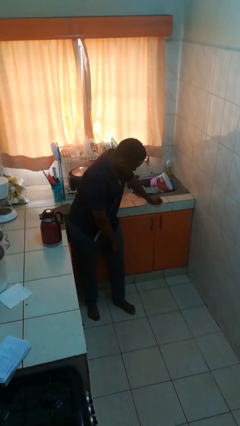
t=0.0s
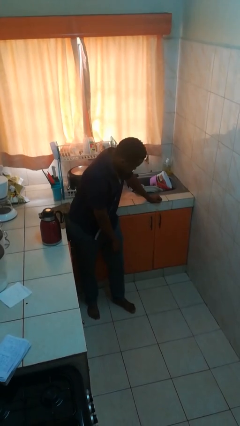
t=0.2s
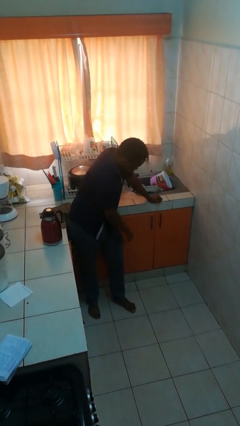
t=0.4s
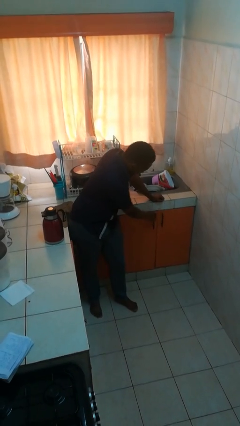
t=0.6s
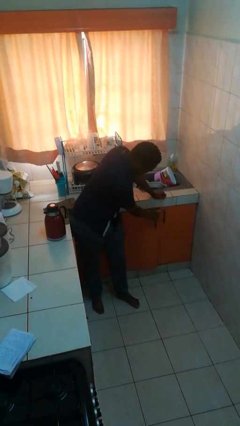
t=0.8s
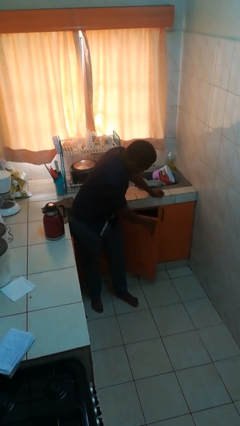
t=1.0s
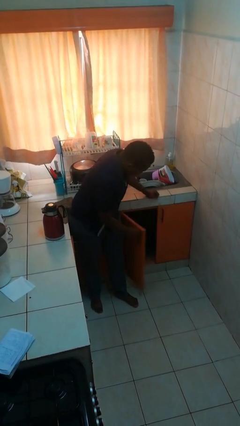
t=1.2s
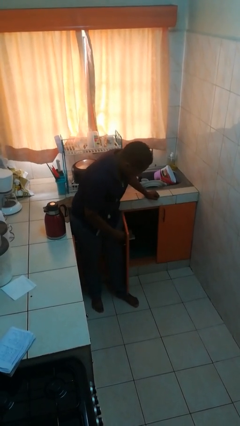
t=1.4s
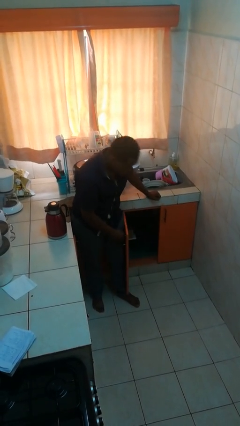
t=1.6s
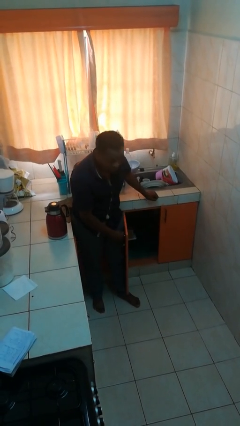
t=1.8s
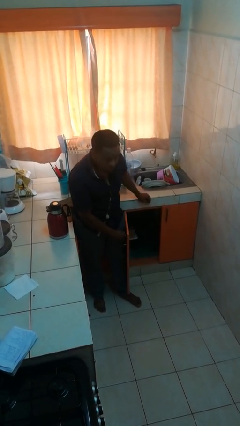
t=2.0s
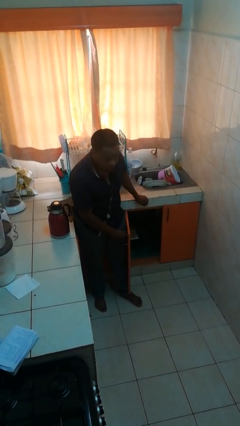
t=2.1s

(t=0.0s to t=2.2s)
person opens cabinet

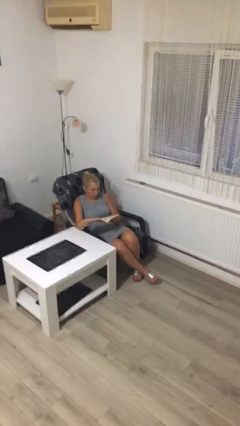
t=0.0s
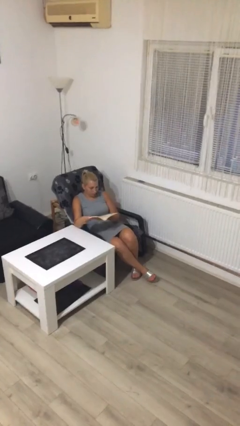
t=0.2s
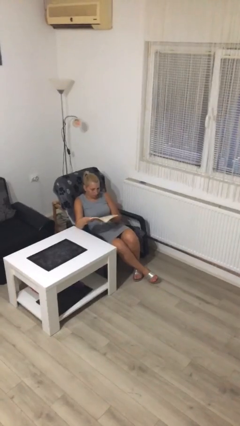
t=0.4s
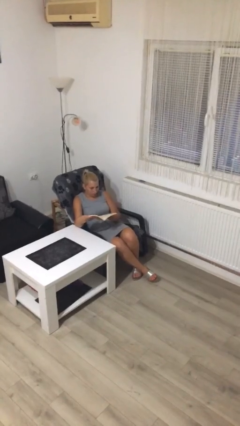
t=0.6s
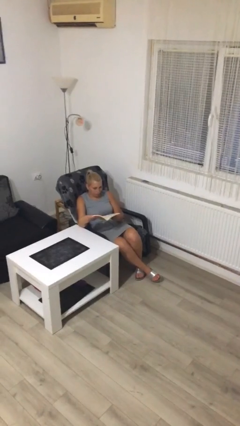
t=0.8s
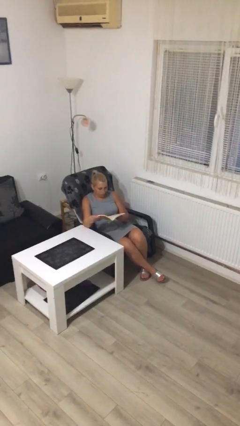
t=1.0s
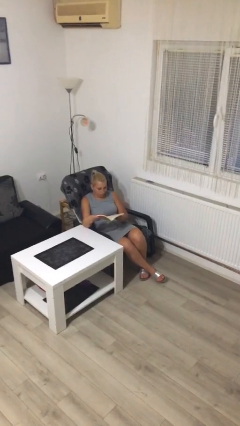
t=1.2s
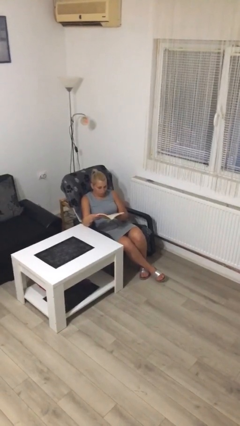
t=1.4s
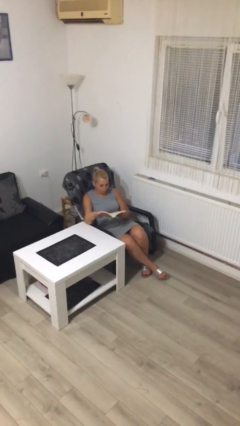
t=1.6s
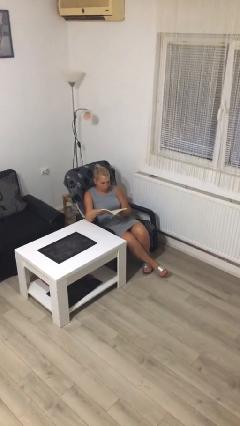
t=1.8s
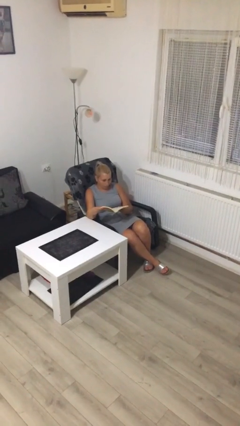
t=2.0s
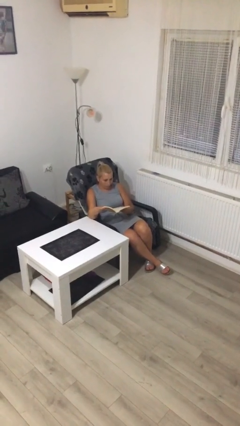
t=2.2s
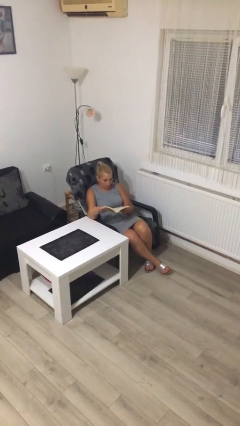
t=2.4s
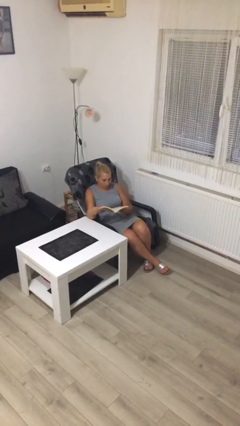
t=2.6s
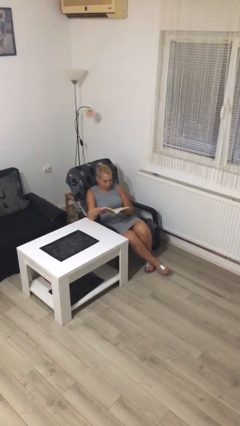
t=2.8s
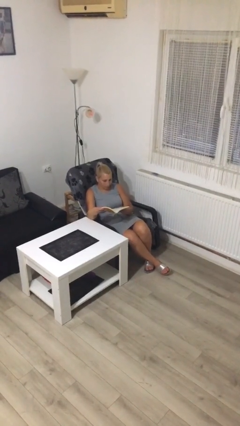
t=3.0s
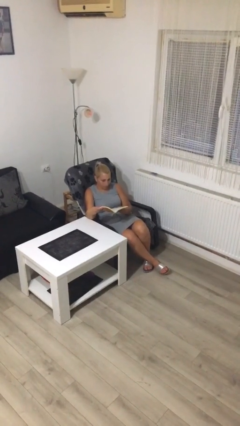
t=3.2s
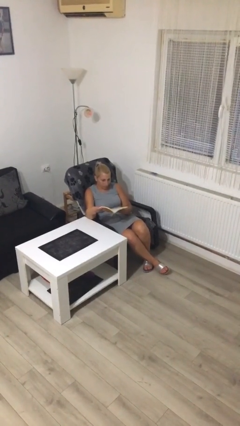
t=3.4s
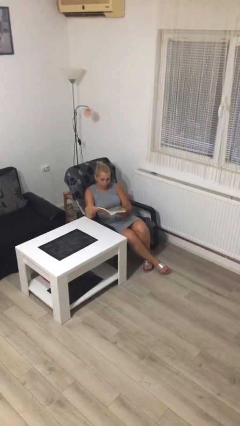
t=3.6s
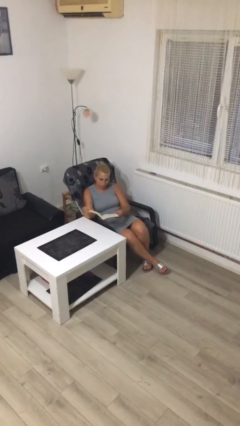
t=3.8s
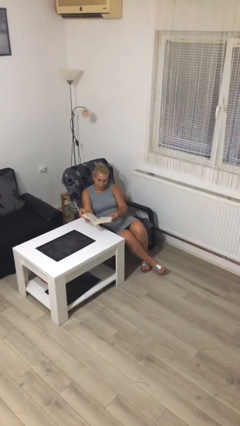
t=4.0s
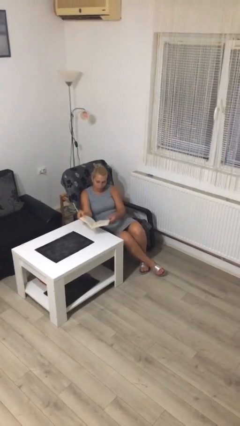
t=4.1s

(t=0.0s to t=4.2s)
person reads document

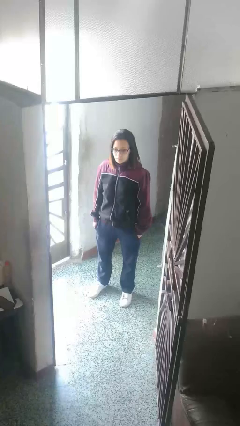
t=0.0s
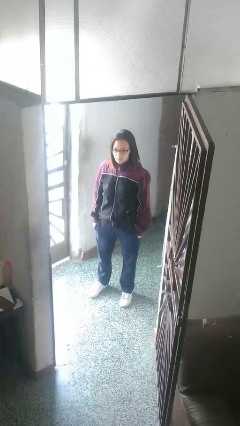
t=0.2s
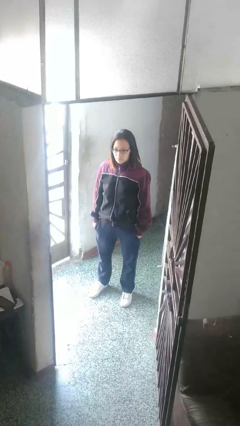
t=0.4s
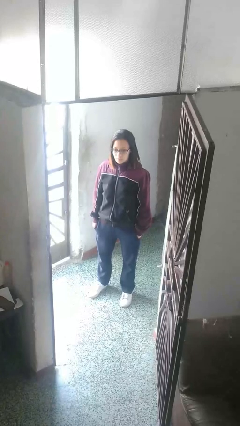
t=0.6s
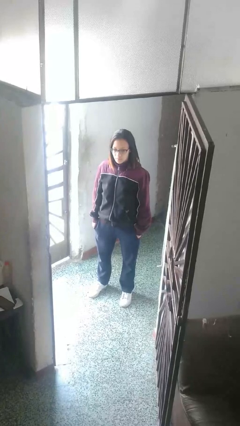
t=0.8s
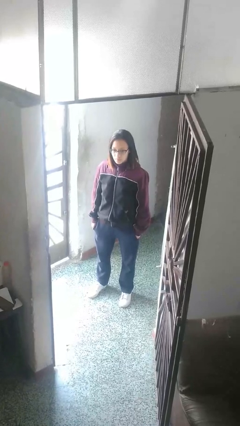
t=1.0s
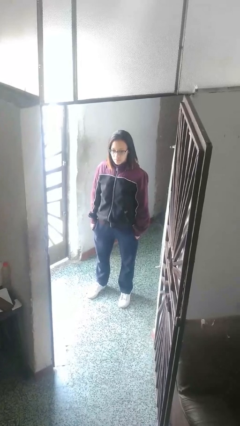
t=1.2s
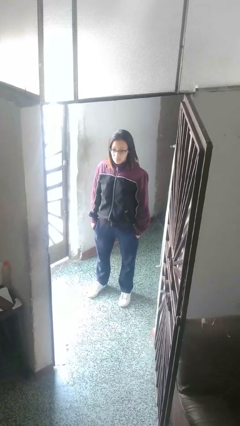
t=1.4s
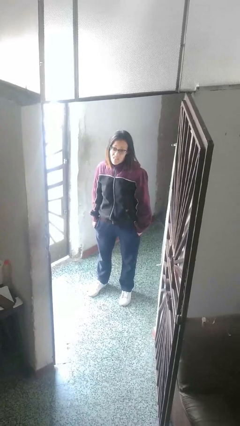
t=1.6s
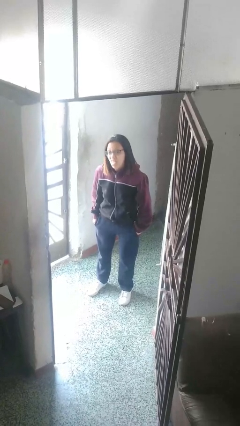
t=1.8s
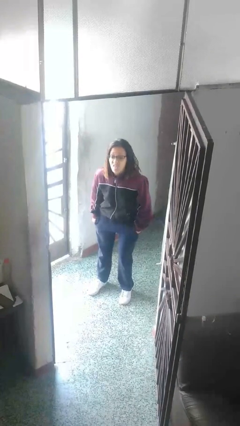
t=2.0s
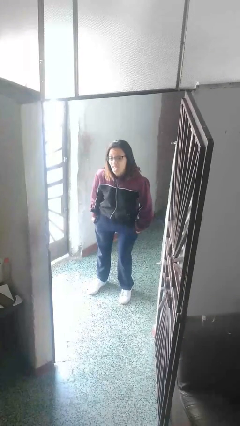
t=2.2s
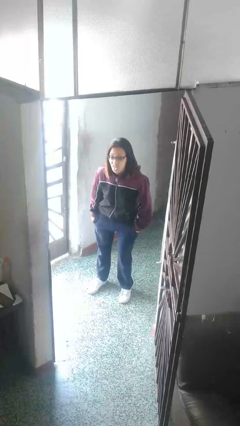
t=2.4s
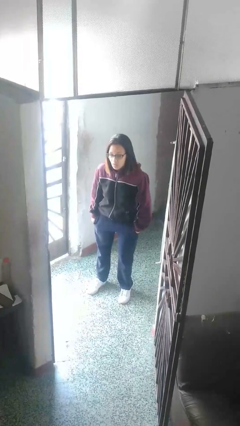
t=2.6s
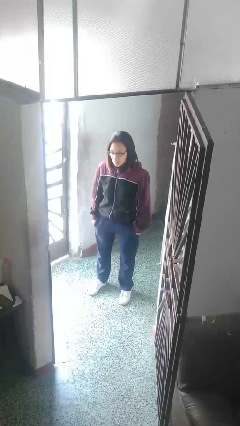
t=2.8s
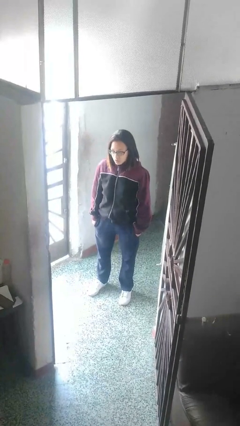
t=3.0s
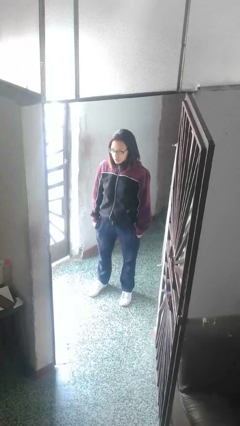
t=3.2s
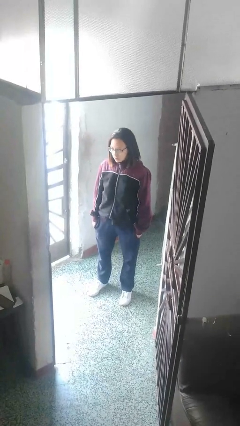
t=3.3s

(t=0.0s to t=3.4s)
person sticks out tongue

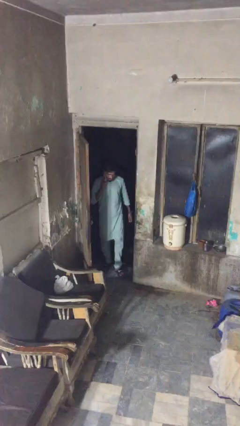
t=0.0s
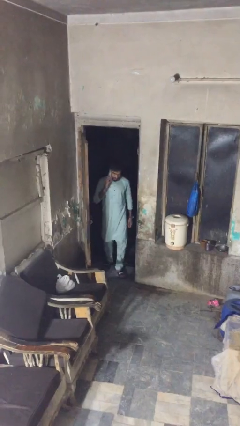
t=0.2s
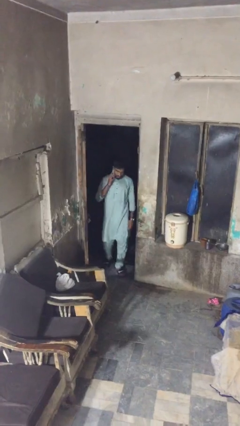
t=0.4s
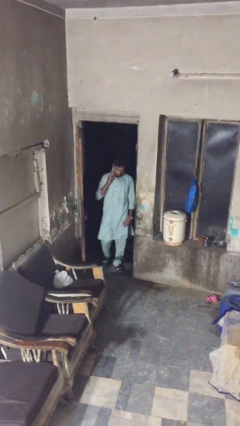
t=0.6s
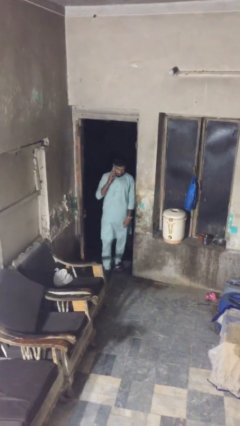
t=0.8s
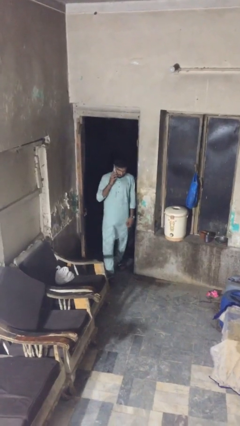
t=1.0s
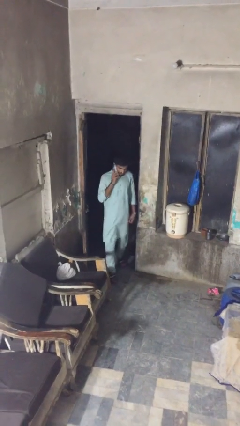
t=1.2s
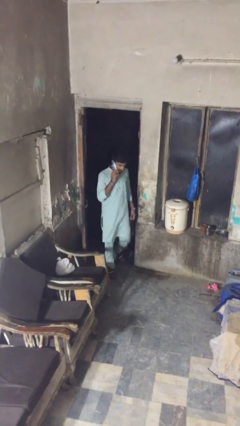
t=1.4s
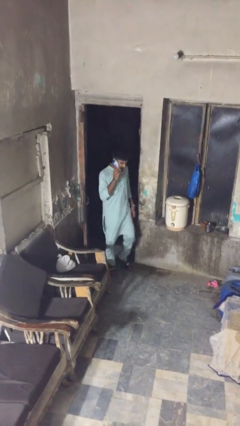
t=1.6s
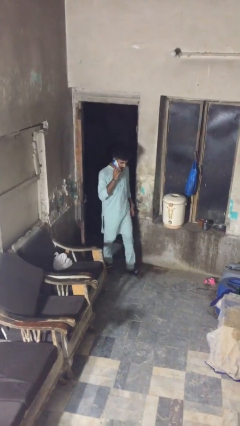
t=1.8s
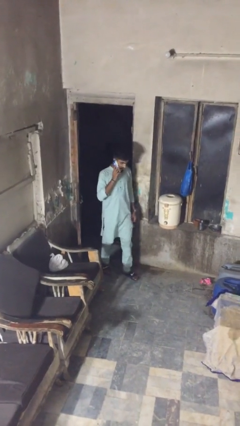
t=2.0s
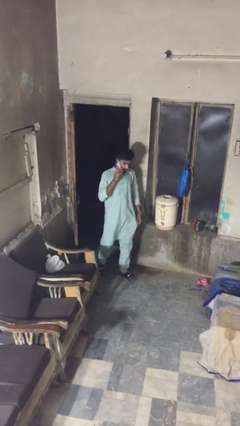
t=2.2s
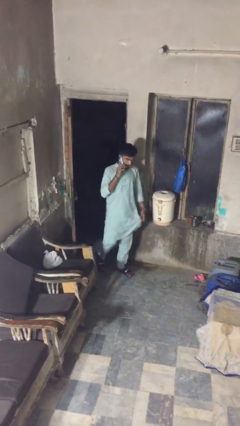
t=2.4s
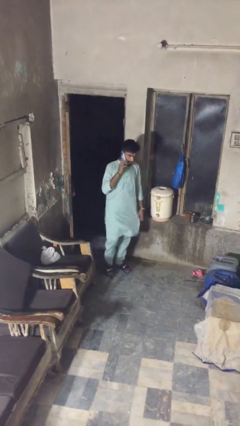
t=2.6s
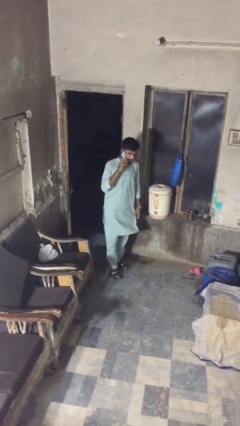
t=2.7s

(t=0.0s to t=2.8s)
person enters scene through structure

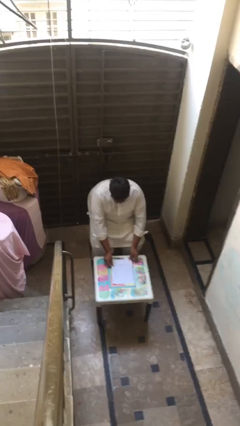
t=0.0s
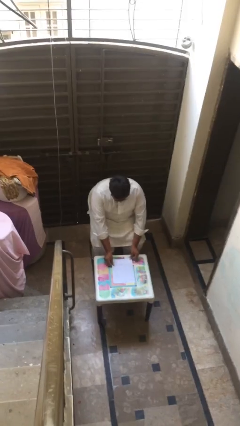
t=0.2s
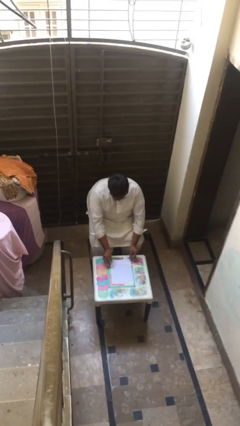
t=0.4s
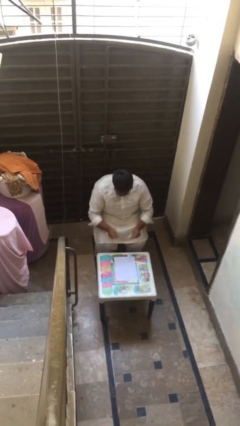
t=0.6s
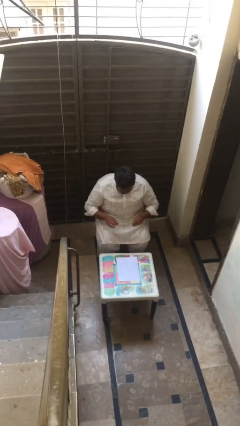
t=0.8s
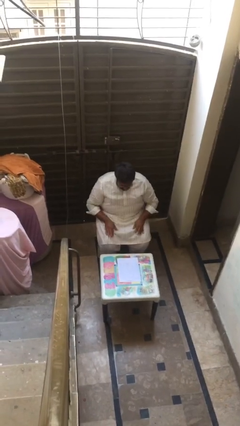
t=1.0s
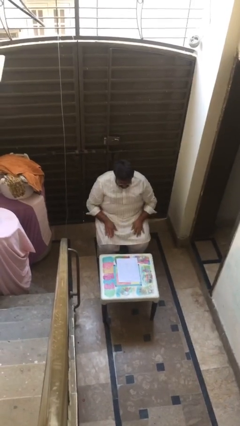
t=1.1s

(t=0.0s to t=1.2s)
person puts down object on table

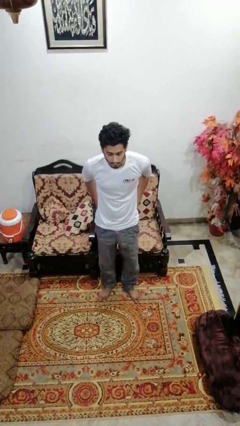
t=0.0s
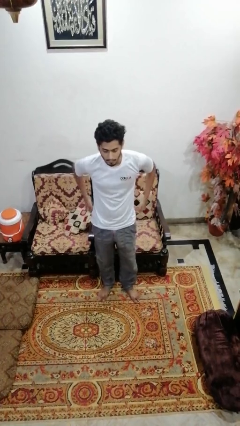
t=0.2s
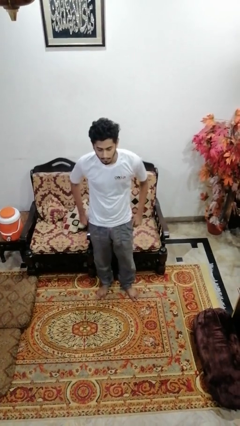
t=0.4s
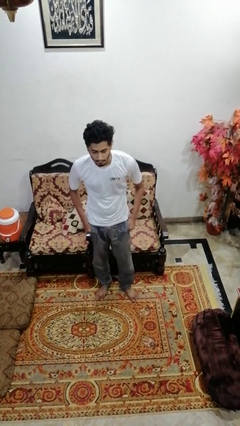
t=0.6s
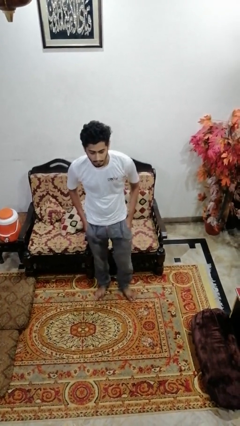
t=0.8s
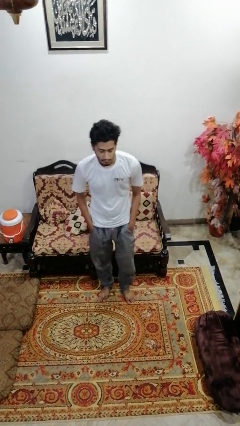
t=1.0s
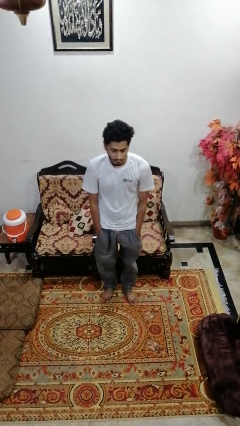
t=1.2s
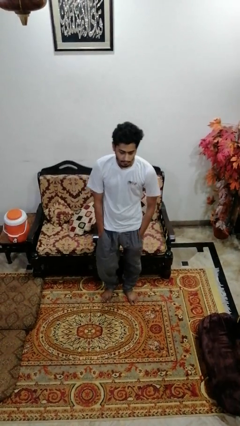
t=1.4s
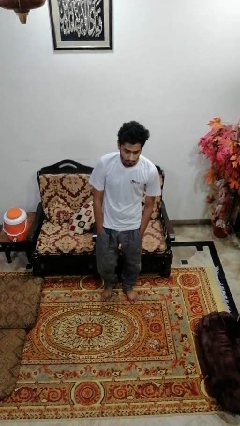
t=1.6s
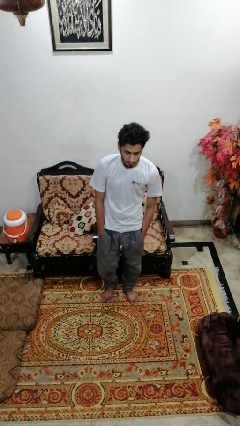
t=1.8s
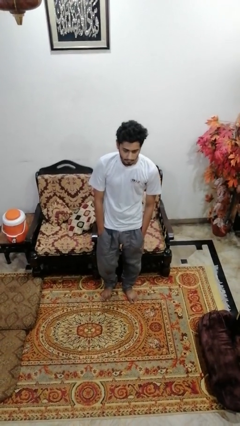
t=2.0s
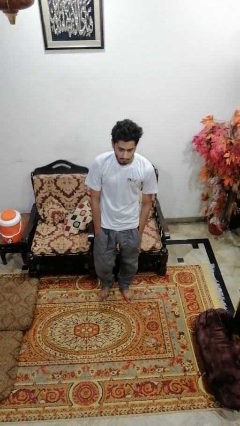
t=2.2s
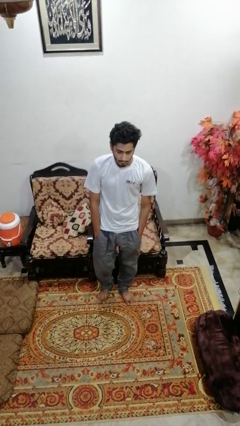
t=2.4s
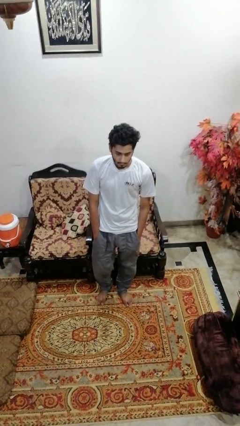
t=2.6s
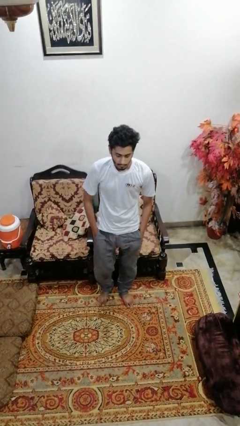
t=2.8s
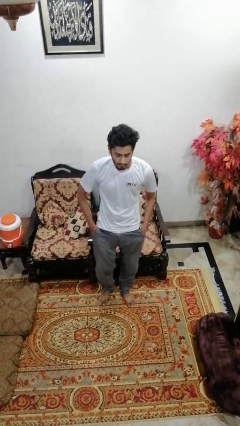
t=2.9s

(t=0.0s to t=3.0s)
person puts hands in back pockets

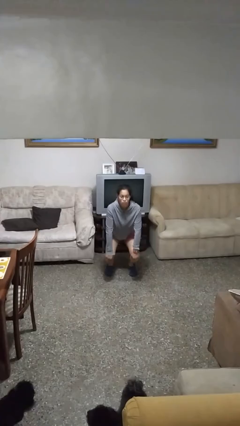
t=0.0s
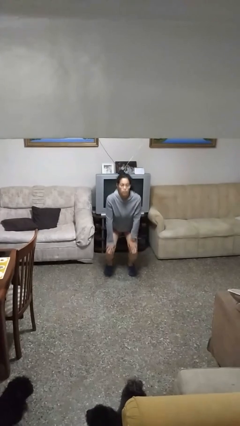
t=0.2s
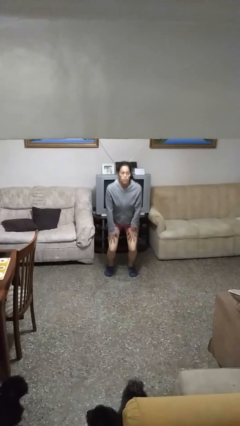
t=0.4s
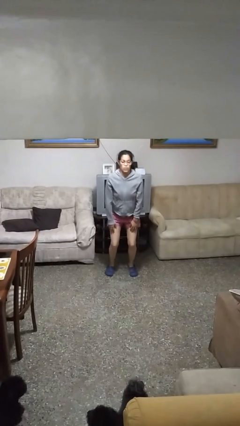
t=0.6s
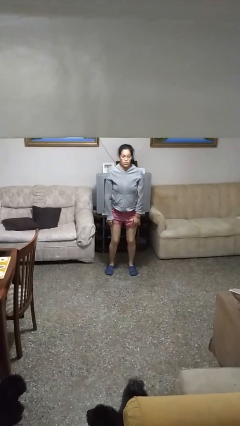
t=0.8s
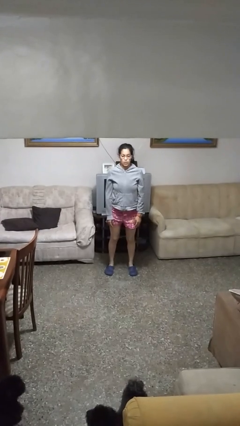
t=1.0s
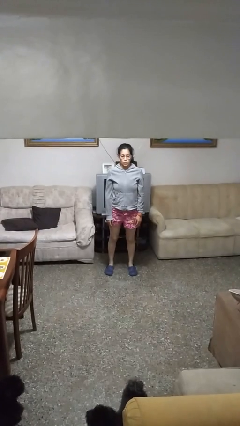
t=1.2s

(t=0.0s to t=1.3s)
person stands up
